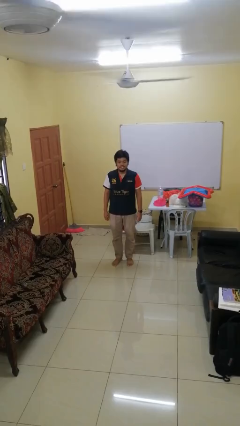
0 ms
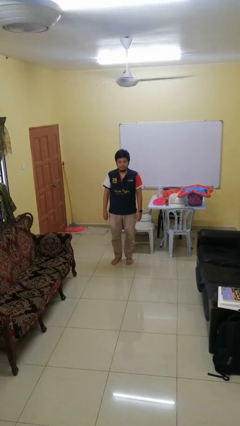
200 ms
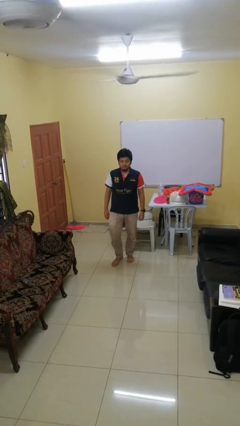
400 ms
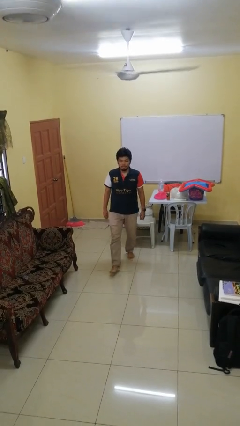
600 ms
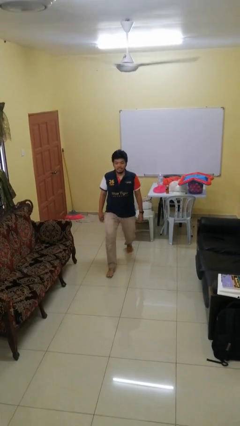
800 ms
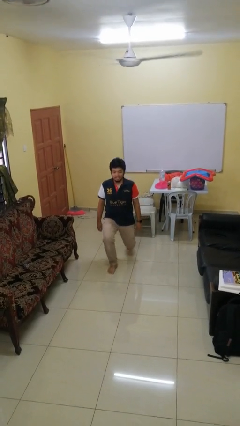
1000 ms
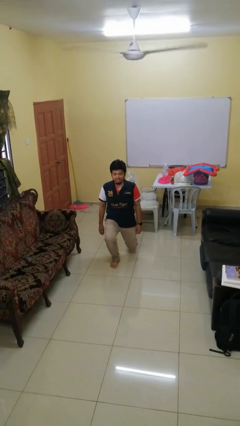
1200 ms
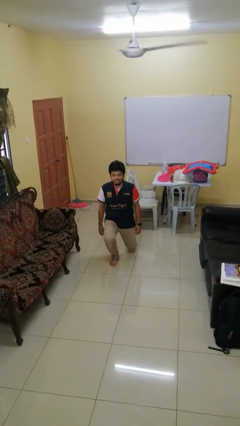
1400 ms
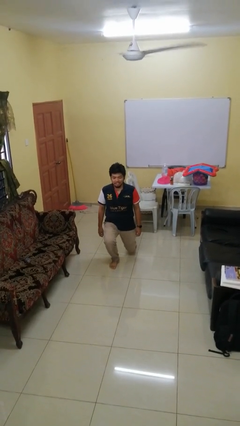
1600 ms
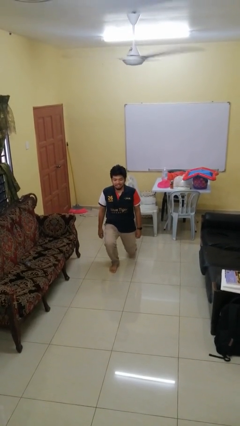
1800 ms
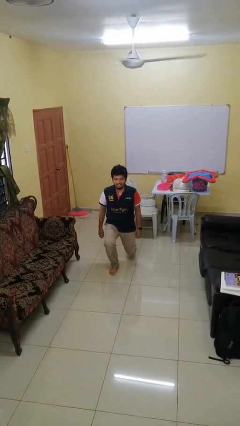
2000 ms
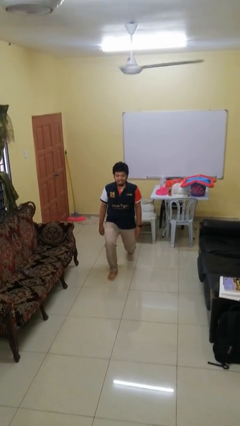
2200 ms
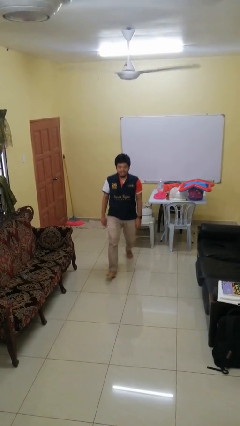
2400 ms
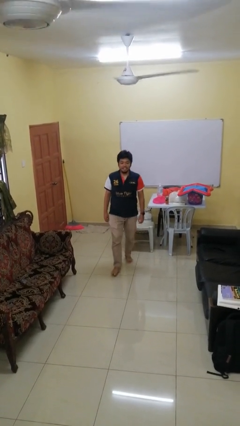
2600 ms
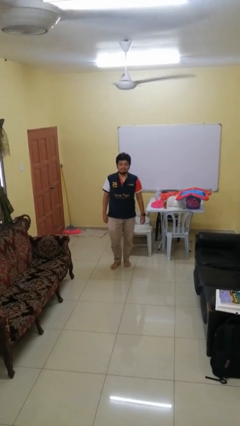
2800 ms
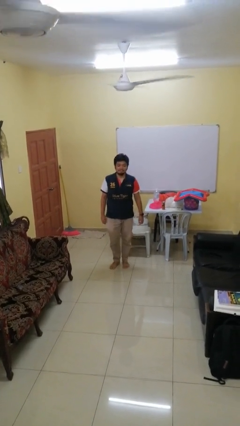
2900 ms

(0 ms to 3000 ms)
person exercises with lunges

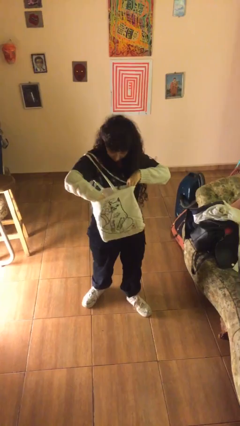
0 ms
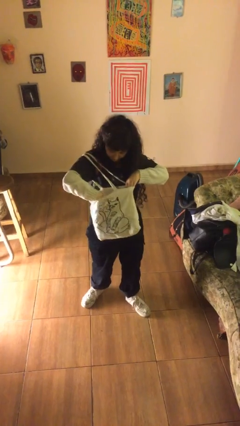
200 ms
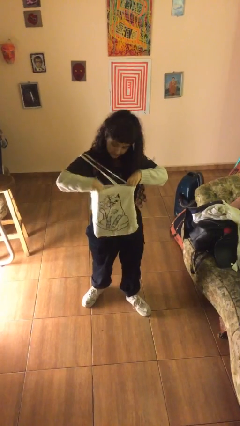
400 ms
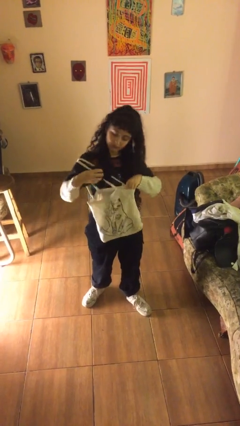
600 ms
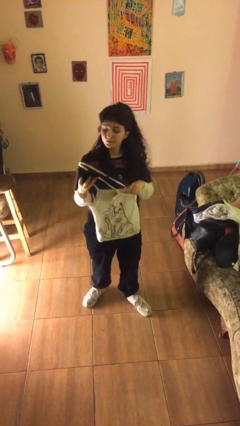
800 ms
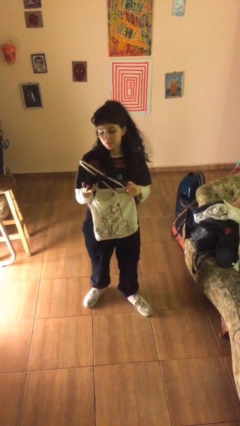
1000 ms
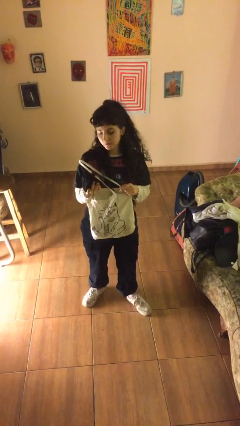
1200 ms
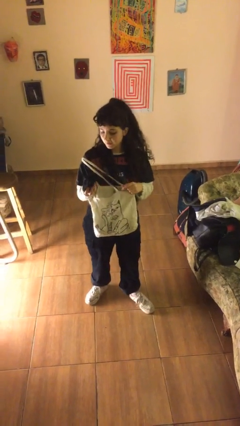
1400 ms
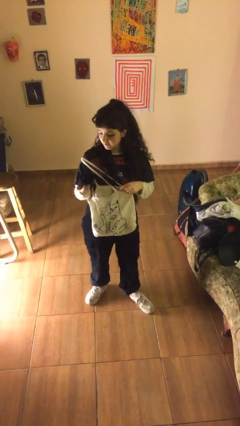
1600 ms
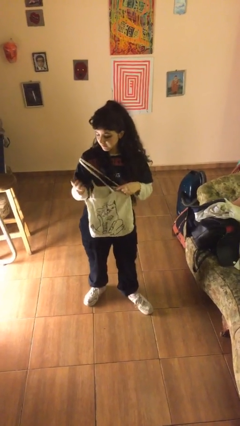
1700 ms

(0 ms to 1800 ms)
person takes object from purse

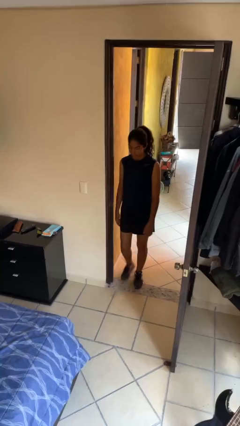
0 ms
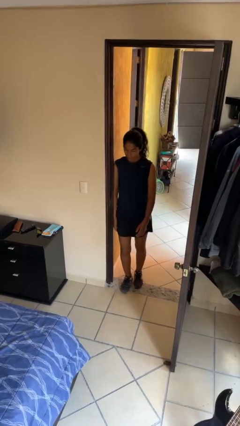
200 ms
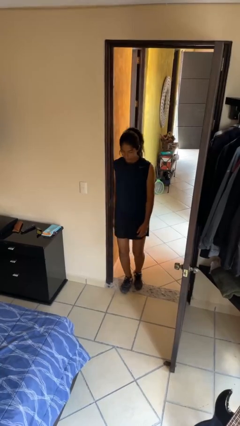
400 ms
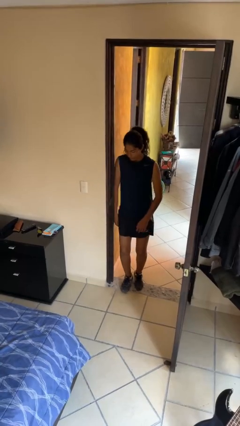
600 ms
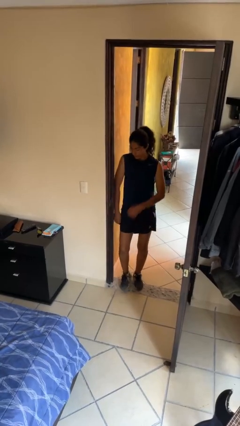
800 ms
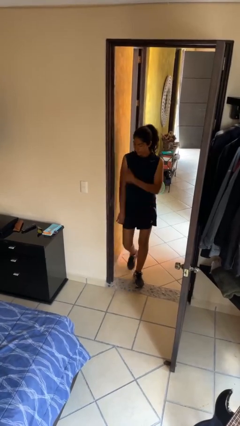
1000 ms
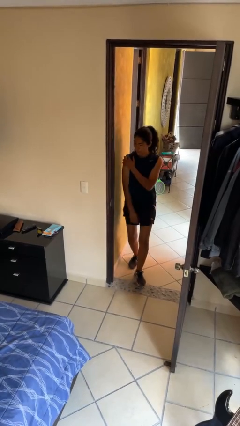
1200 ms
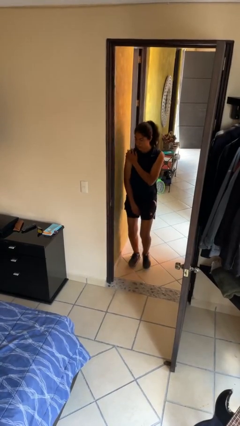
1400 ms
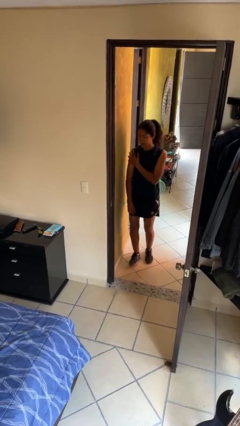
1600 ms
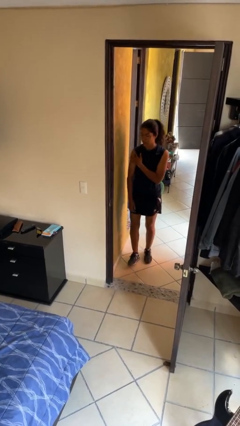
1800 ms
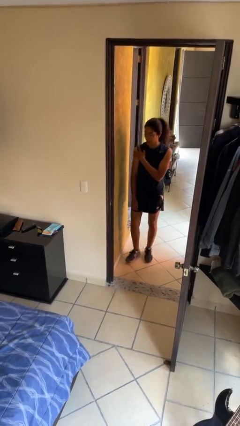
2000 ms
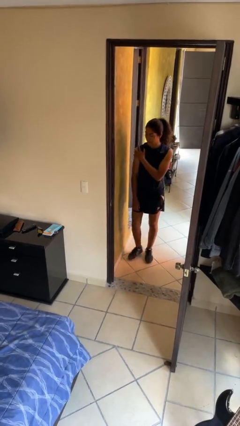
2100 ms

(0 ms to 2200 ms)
person bumps into wall

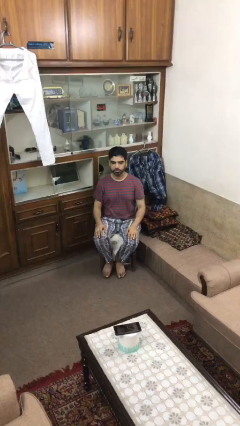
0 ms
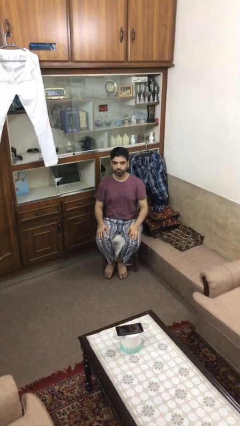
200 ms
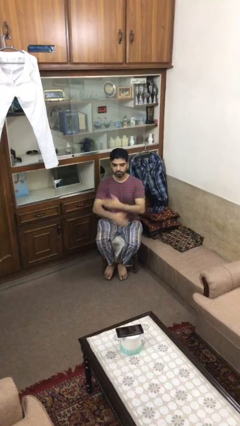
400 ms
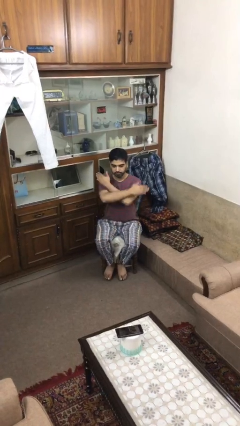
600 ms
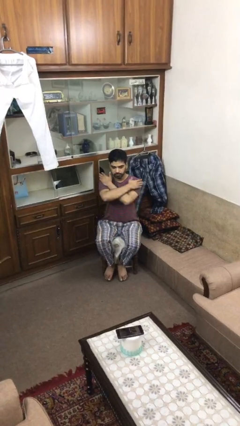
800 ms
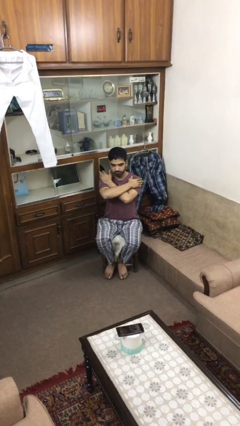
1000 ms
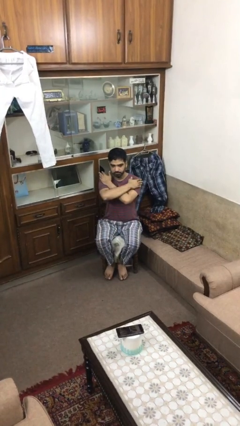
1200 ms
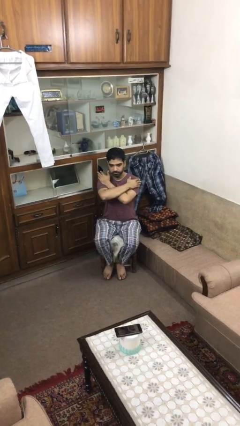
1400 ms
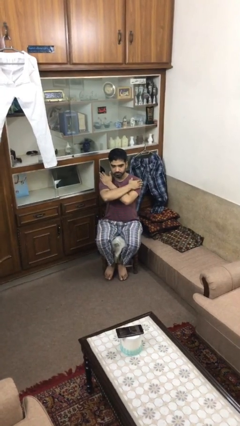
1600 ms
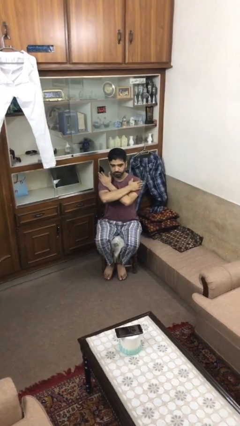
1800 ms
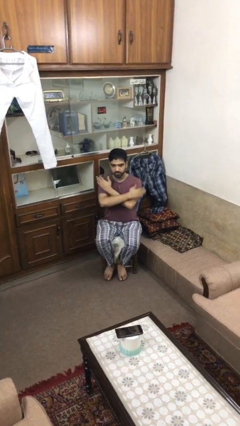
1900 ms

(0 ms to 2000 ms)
person crosses arms

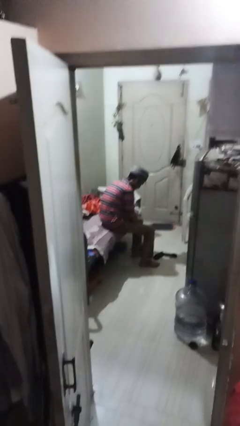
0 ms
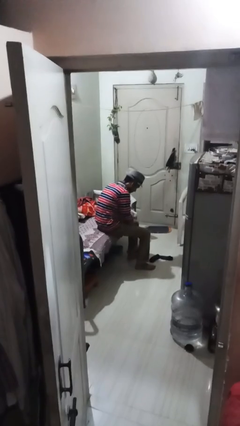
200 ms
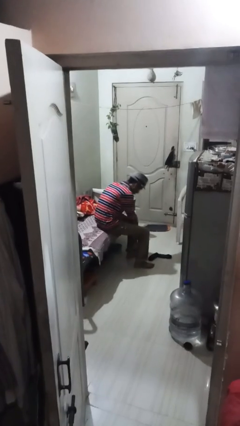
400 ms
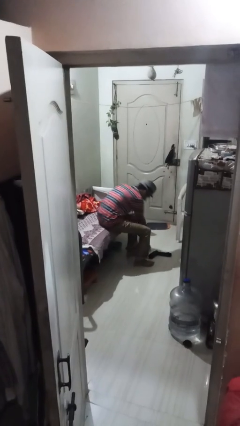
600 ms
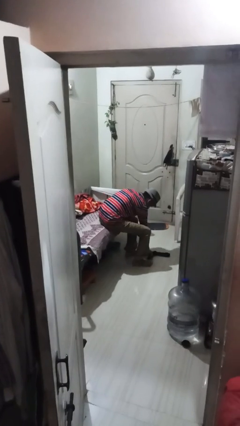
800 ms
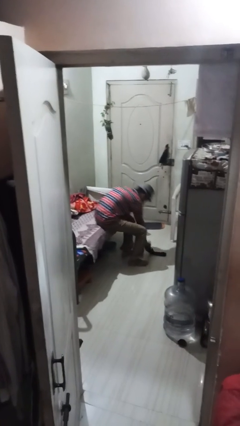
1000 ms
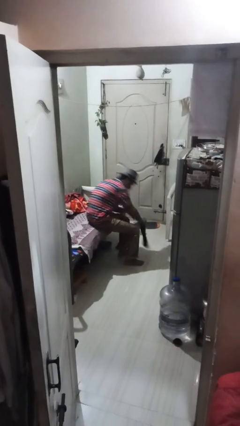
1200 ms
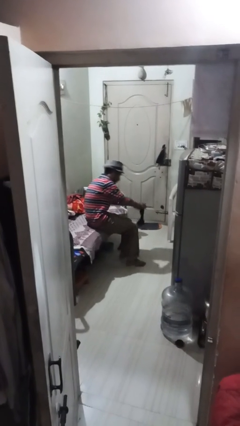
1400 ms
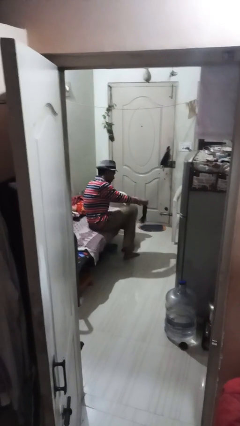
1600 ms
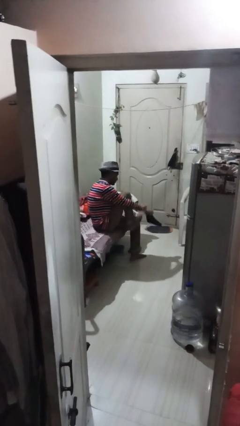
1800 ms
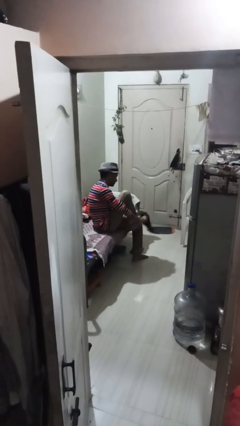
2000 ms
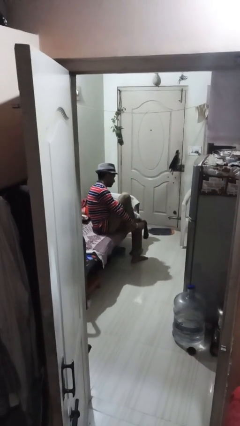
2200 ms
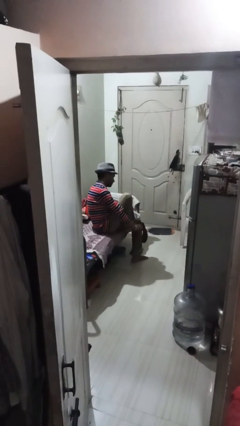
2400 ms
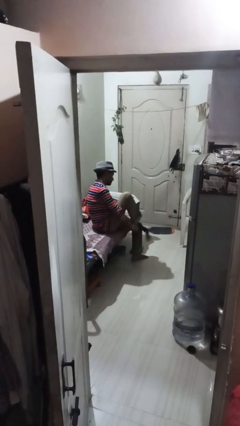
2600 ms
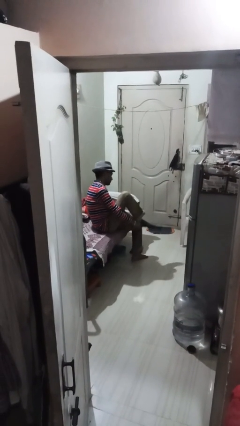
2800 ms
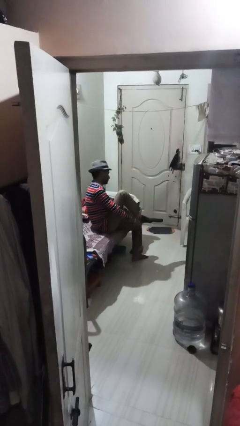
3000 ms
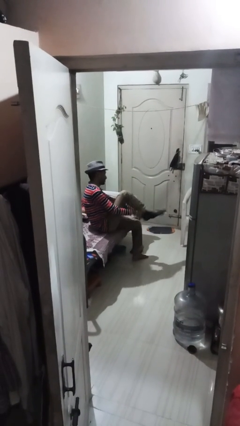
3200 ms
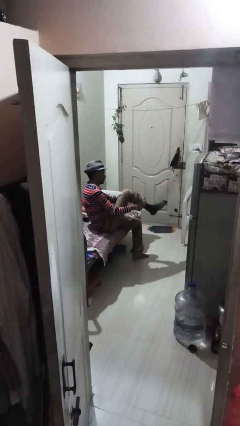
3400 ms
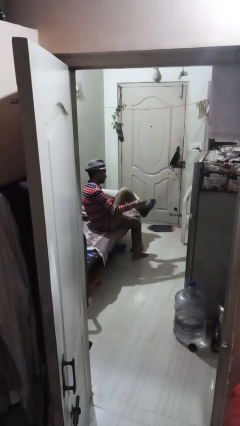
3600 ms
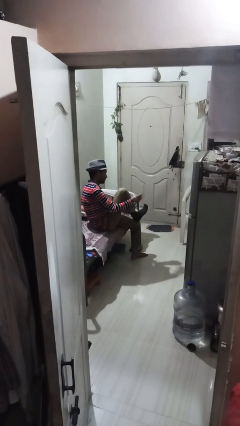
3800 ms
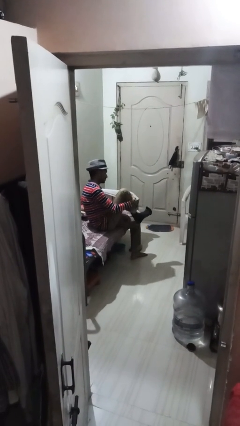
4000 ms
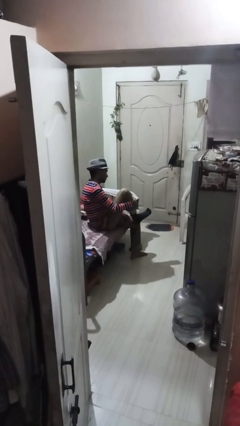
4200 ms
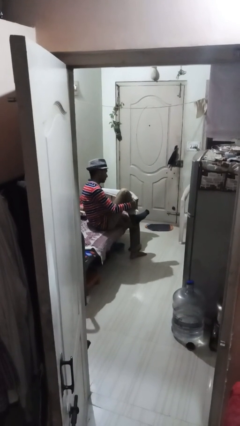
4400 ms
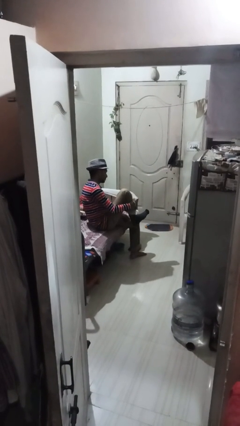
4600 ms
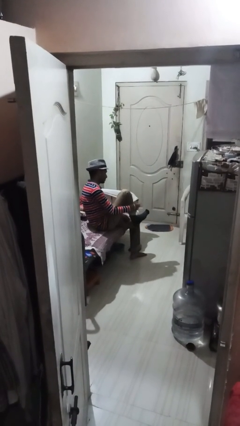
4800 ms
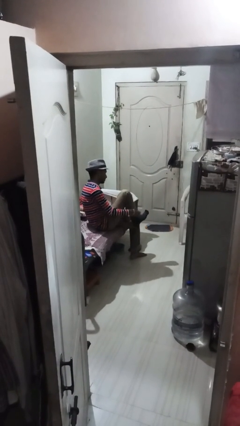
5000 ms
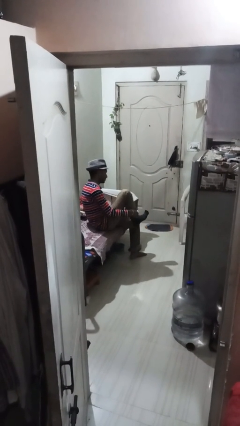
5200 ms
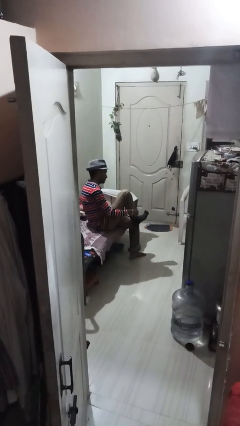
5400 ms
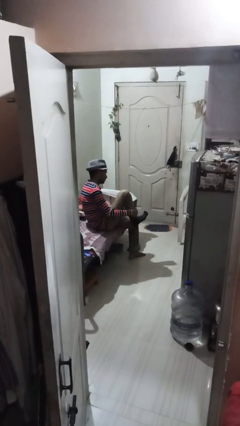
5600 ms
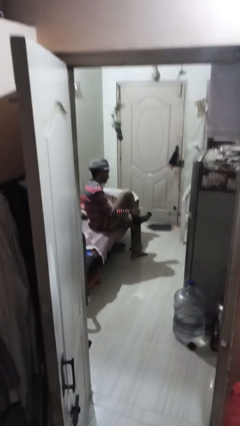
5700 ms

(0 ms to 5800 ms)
person puts on socks

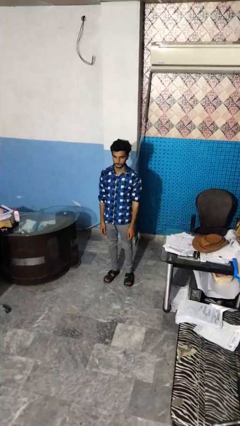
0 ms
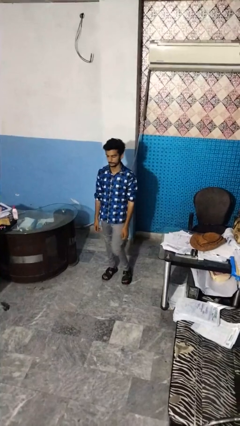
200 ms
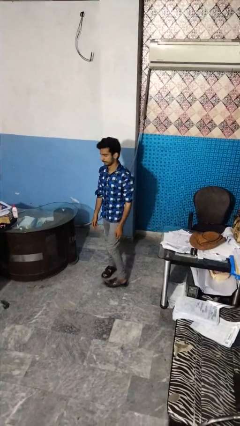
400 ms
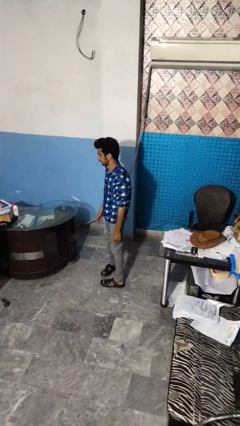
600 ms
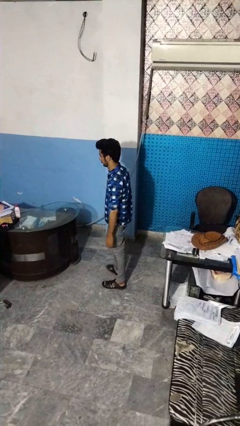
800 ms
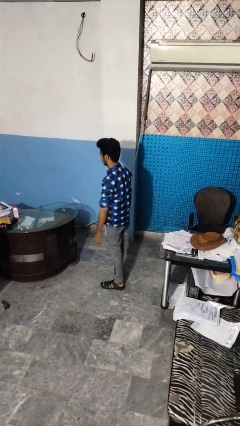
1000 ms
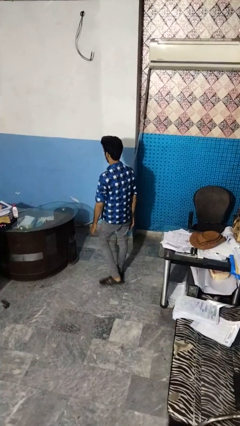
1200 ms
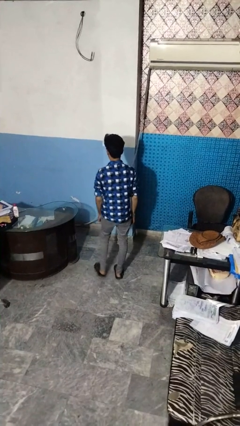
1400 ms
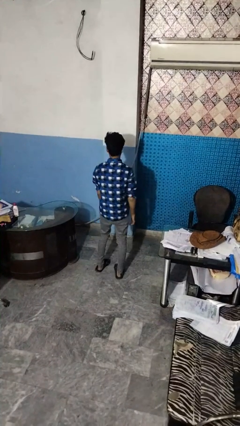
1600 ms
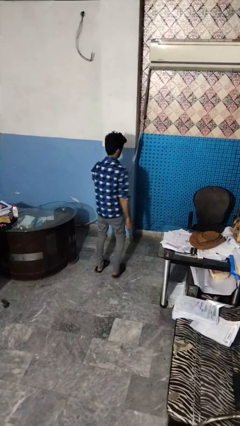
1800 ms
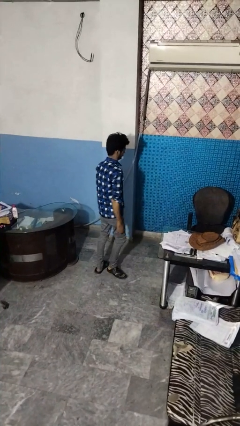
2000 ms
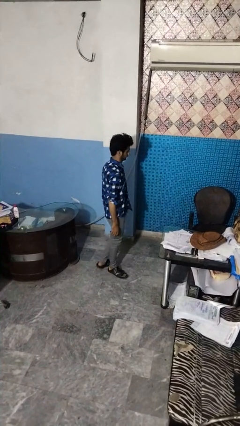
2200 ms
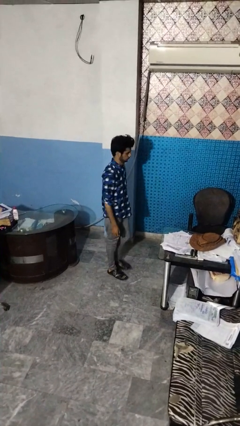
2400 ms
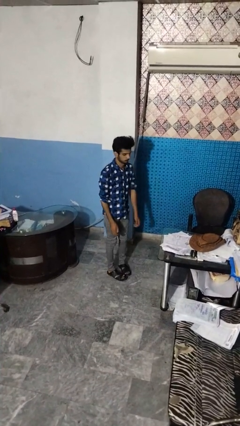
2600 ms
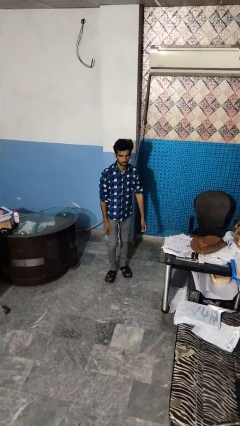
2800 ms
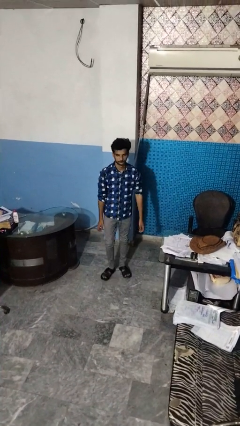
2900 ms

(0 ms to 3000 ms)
person twirls
